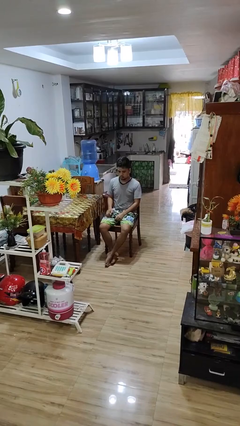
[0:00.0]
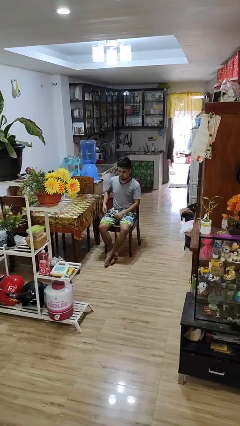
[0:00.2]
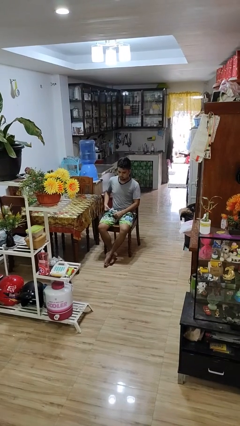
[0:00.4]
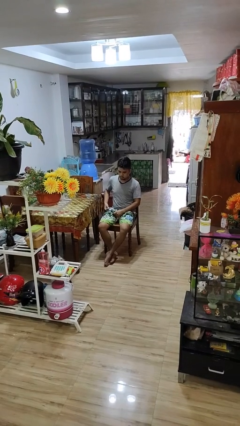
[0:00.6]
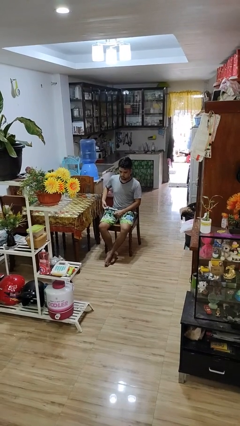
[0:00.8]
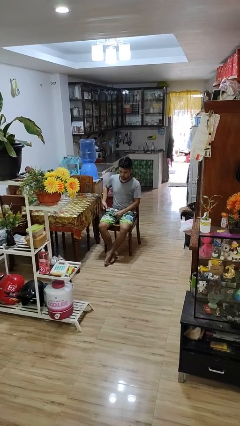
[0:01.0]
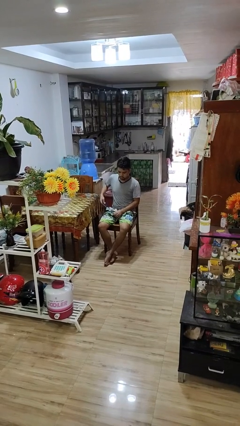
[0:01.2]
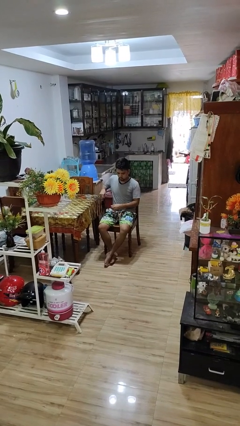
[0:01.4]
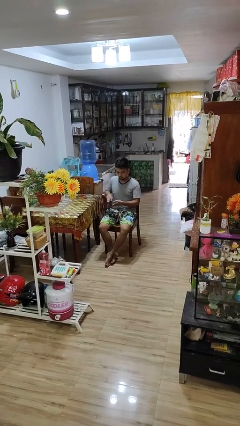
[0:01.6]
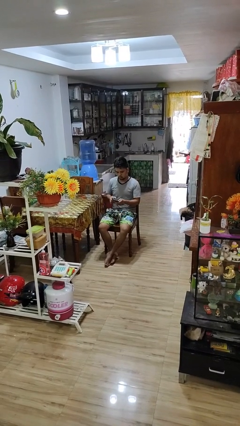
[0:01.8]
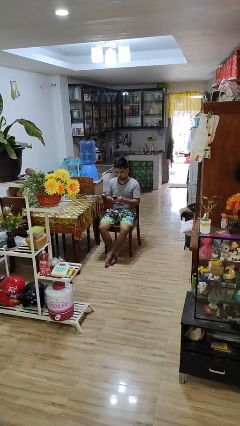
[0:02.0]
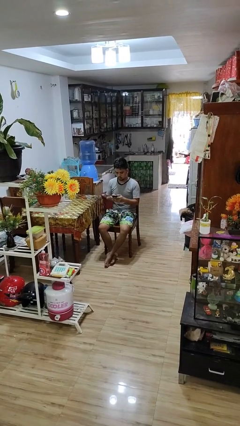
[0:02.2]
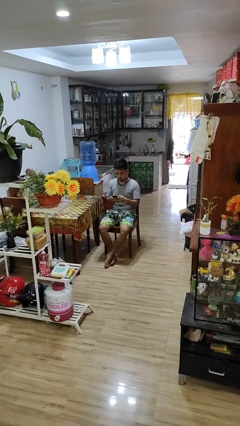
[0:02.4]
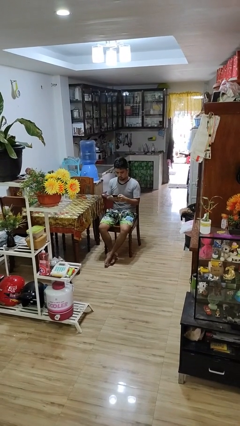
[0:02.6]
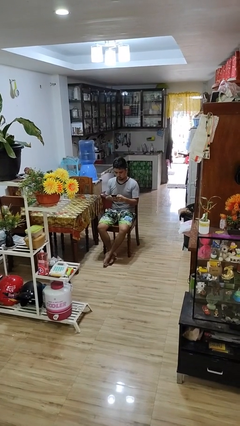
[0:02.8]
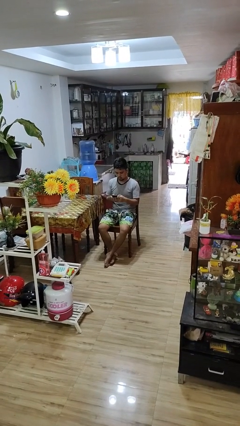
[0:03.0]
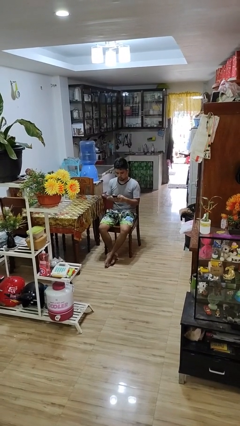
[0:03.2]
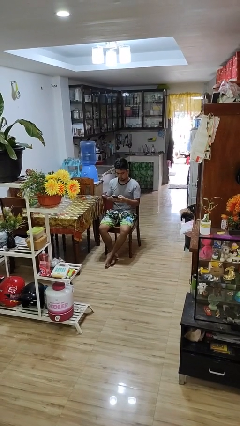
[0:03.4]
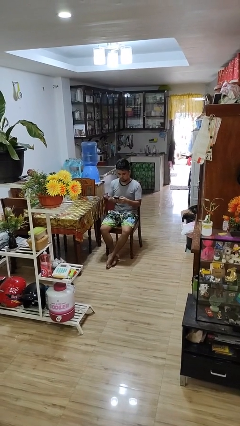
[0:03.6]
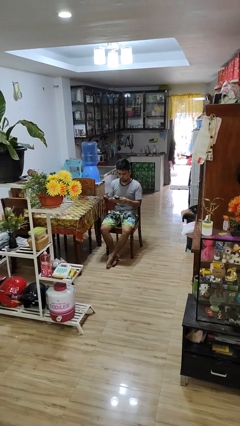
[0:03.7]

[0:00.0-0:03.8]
person takes phone from pocket

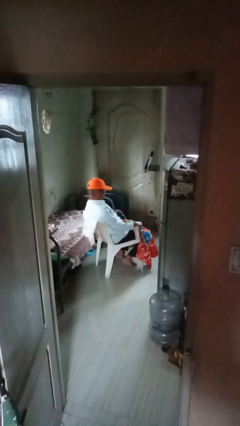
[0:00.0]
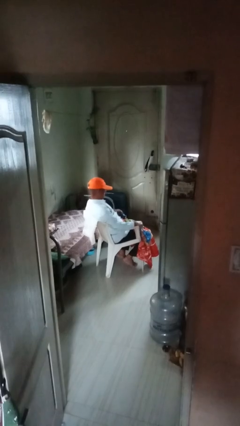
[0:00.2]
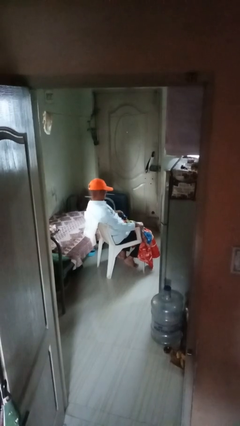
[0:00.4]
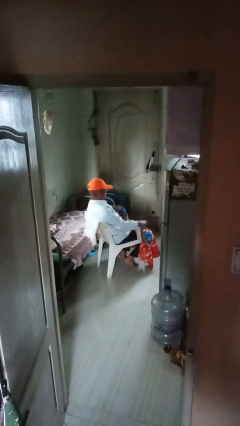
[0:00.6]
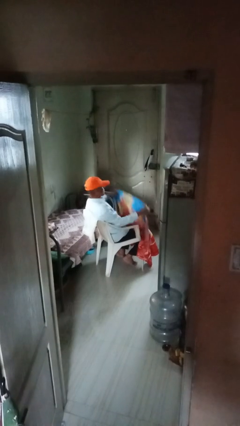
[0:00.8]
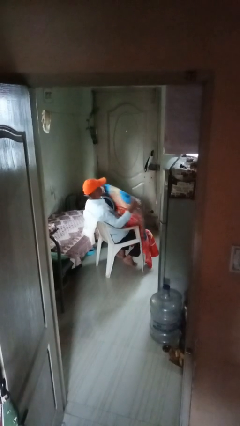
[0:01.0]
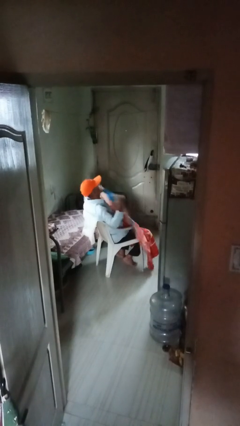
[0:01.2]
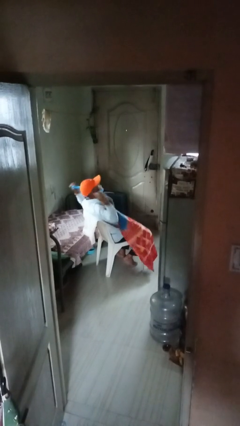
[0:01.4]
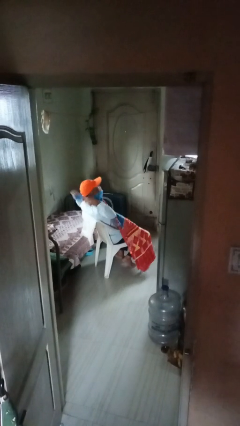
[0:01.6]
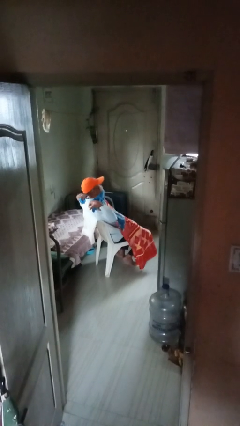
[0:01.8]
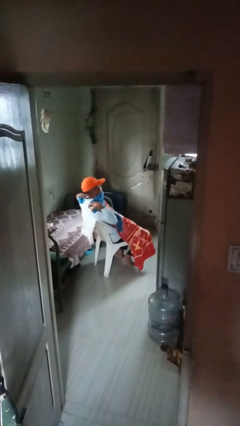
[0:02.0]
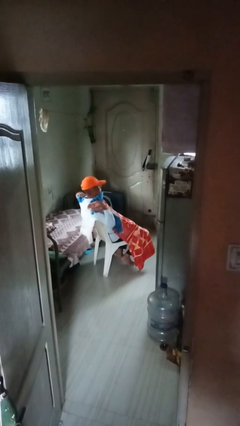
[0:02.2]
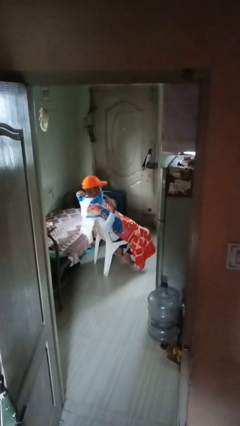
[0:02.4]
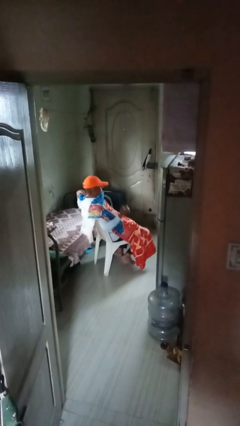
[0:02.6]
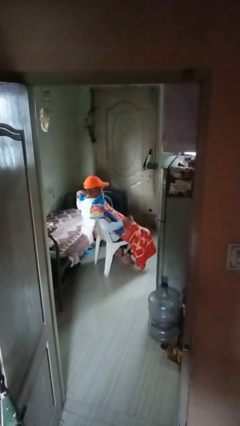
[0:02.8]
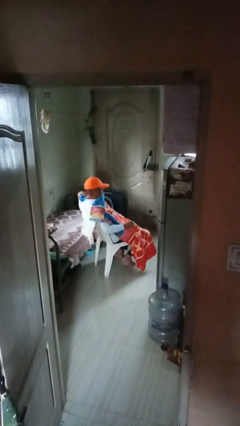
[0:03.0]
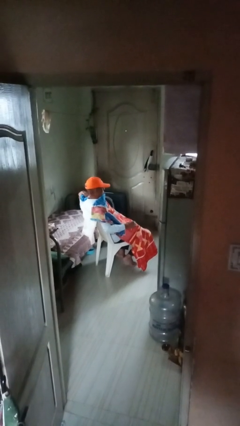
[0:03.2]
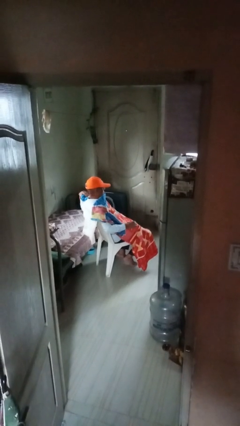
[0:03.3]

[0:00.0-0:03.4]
person covers with blanket

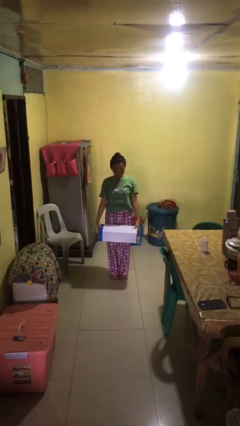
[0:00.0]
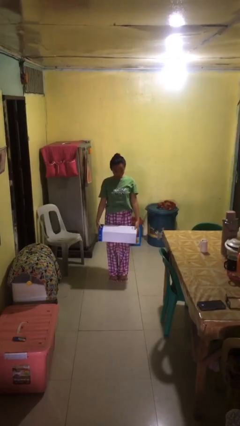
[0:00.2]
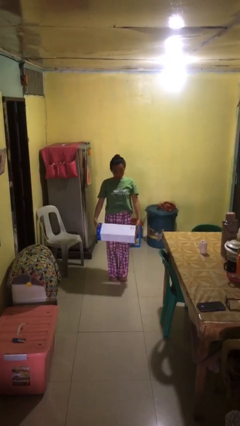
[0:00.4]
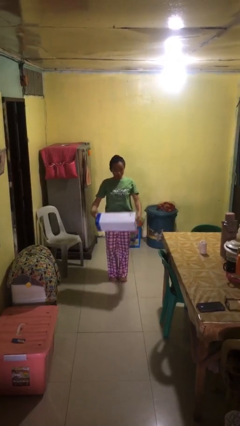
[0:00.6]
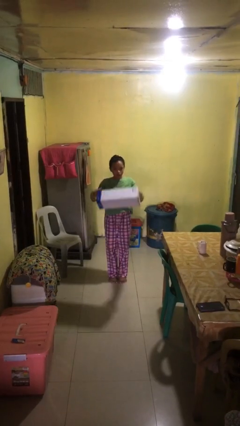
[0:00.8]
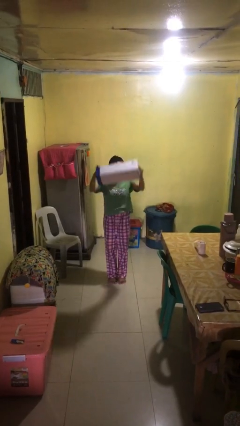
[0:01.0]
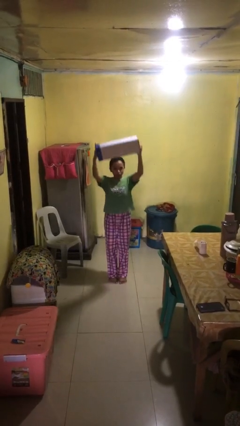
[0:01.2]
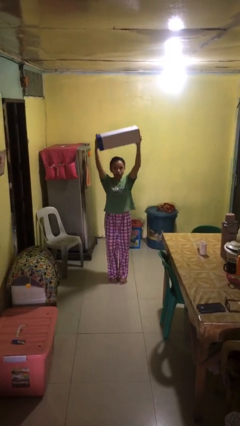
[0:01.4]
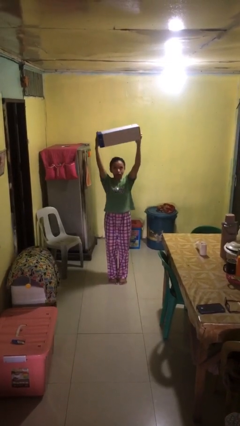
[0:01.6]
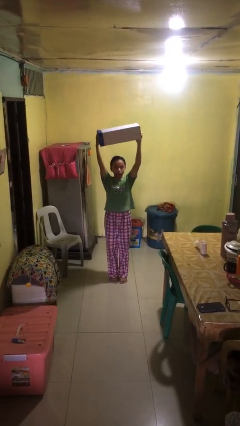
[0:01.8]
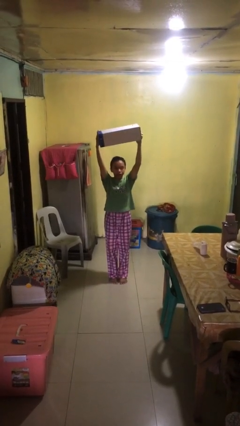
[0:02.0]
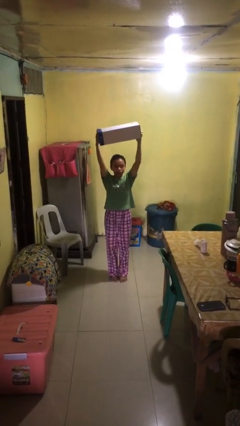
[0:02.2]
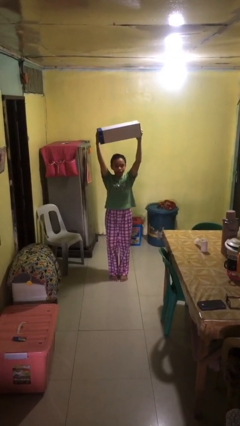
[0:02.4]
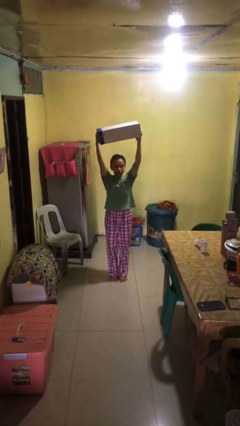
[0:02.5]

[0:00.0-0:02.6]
person holds object above head

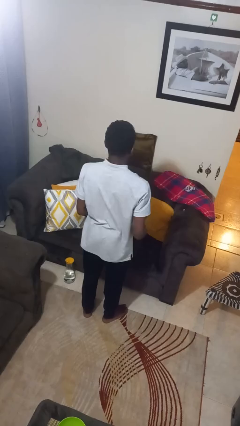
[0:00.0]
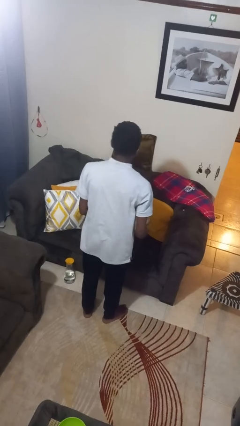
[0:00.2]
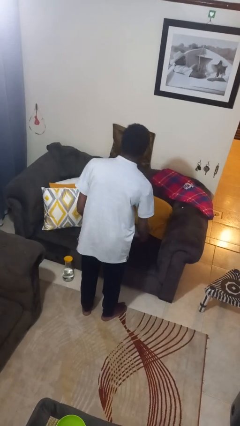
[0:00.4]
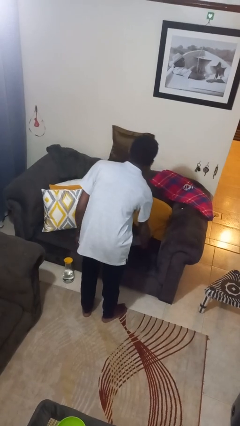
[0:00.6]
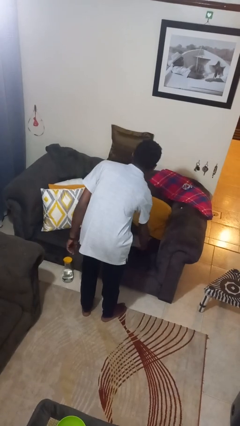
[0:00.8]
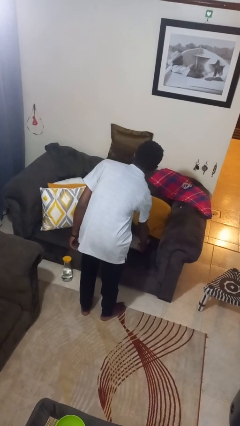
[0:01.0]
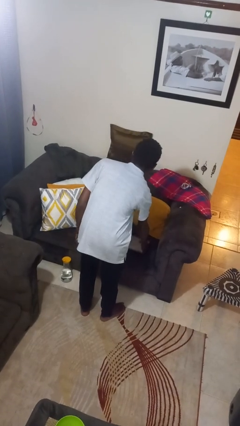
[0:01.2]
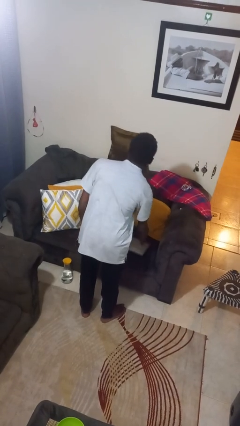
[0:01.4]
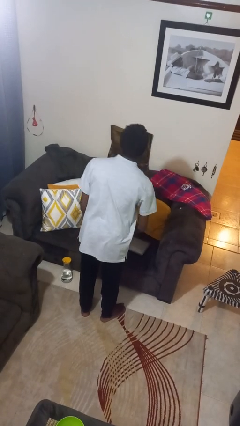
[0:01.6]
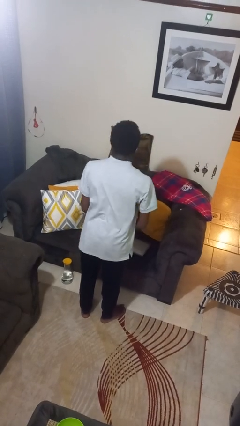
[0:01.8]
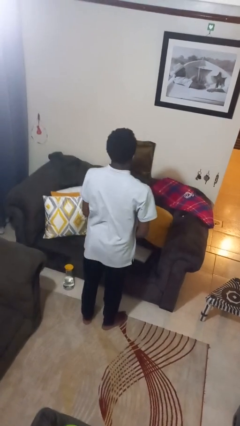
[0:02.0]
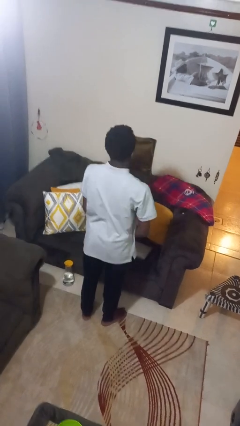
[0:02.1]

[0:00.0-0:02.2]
person puts down object on couch

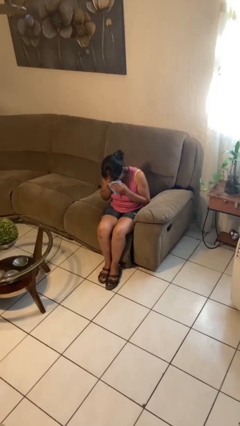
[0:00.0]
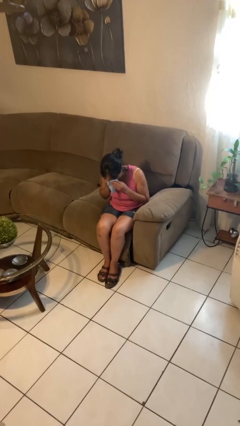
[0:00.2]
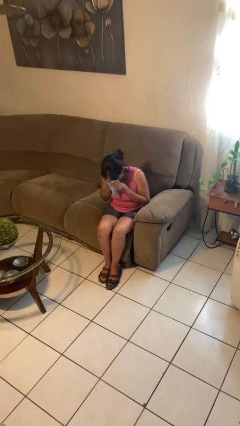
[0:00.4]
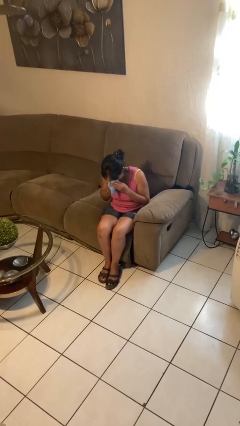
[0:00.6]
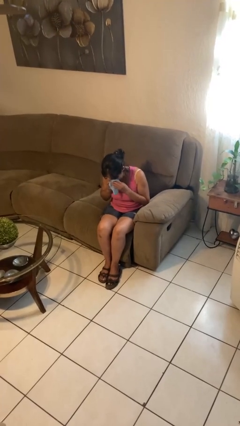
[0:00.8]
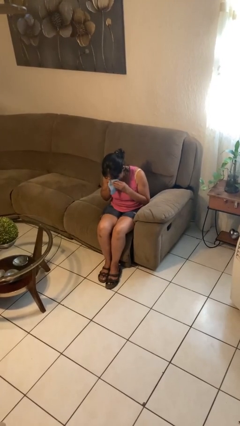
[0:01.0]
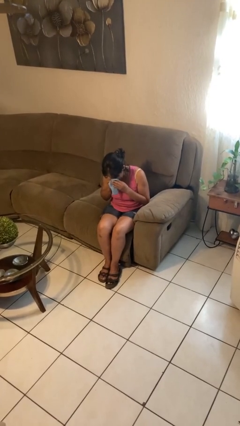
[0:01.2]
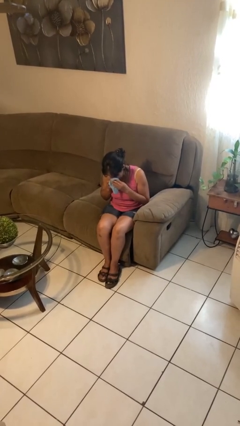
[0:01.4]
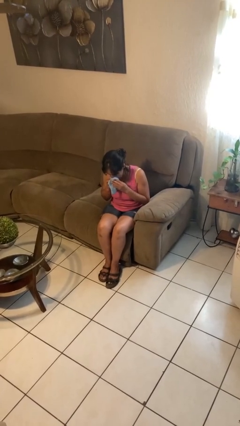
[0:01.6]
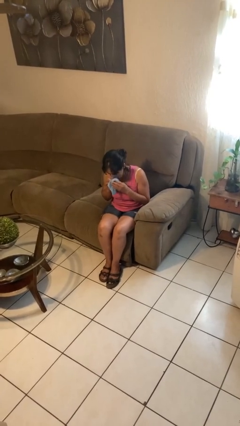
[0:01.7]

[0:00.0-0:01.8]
person blows nose

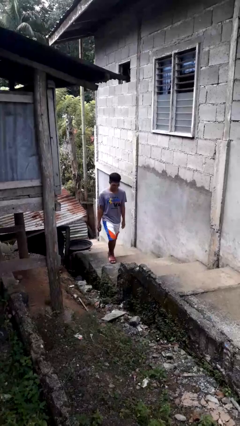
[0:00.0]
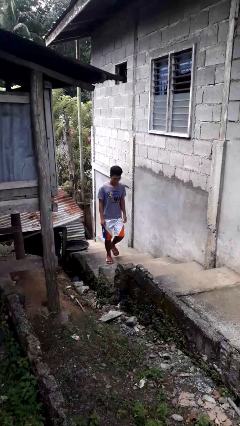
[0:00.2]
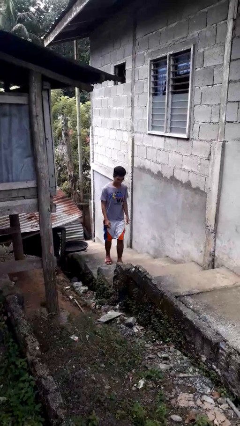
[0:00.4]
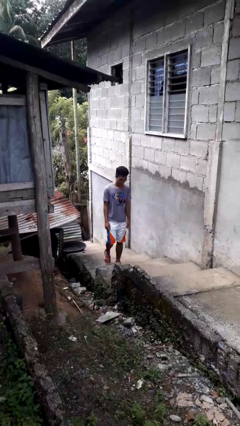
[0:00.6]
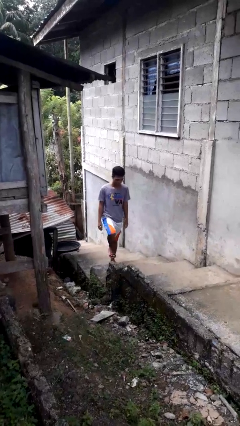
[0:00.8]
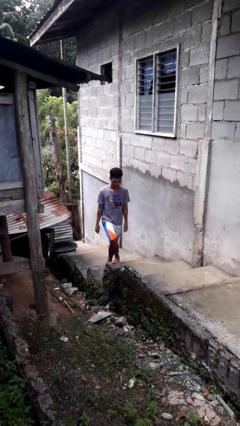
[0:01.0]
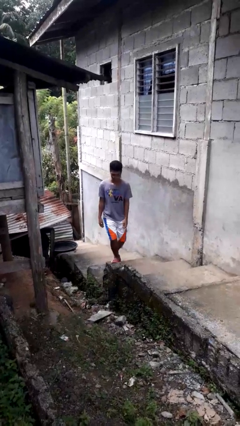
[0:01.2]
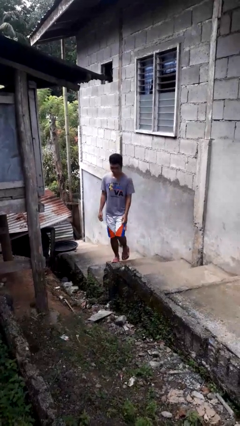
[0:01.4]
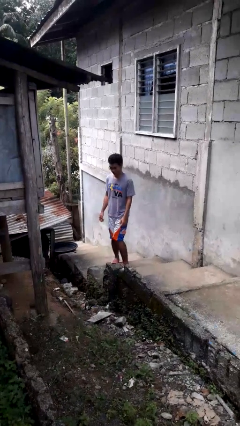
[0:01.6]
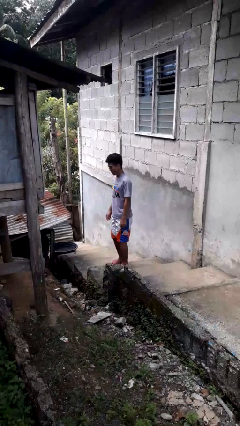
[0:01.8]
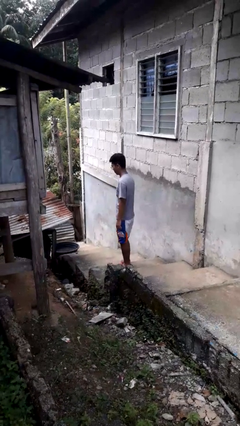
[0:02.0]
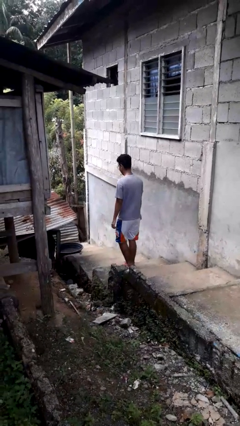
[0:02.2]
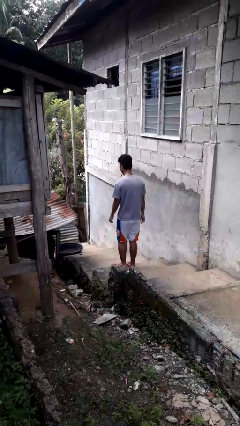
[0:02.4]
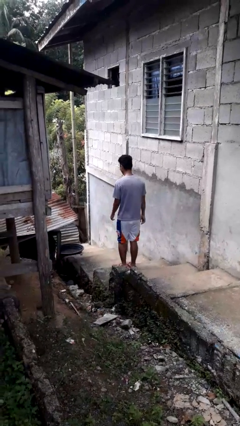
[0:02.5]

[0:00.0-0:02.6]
person climbs up stairs

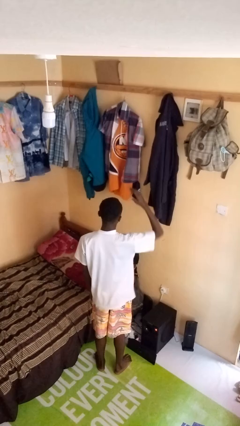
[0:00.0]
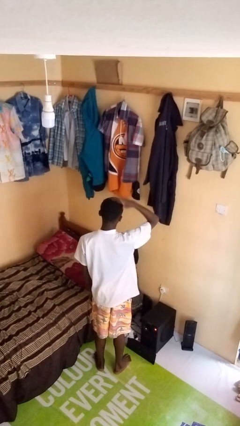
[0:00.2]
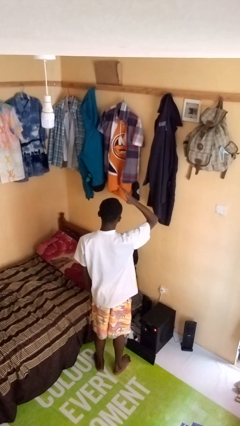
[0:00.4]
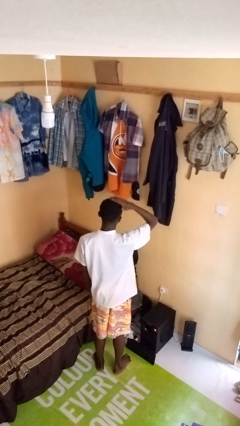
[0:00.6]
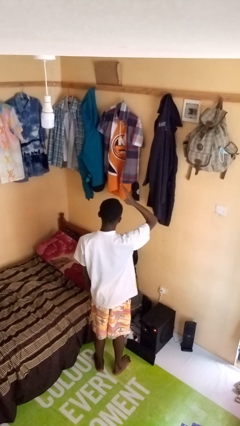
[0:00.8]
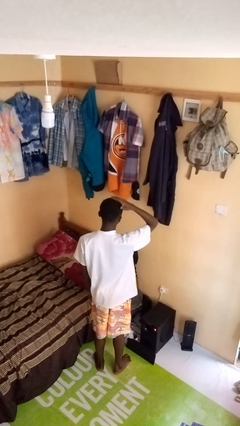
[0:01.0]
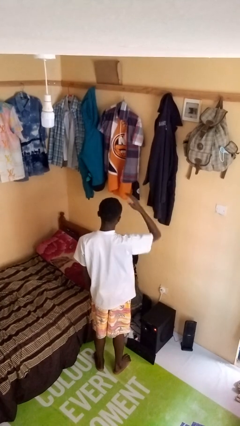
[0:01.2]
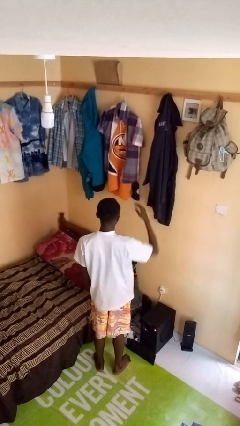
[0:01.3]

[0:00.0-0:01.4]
person pats head
